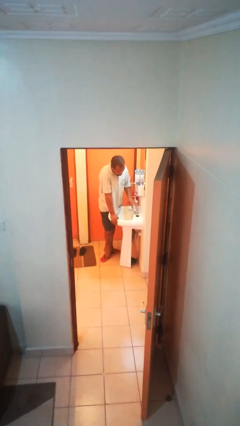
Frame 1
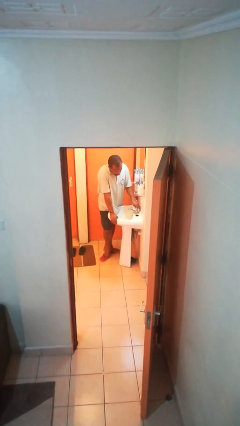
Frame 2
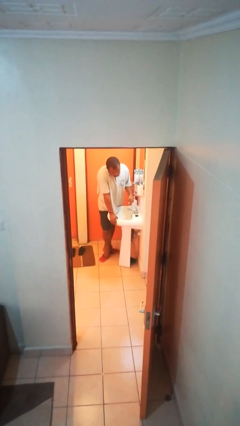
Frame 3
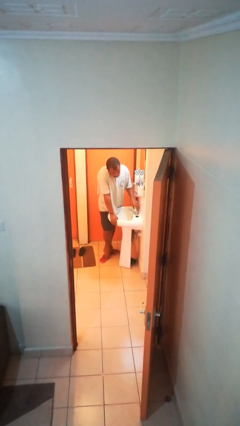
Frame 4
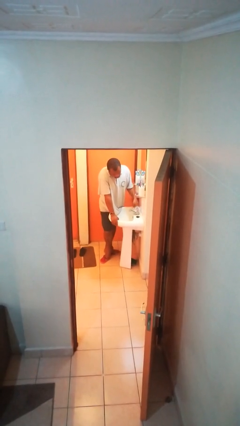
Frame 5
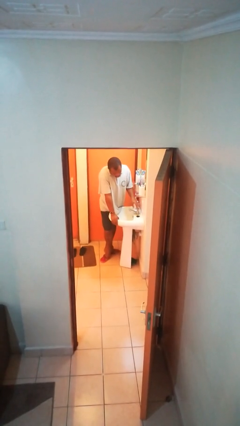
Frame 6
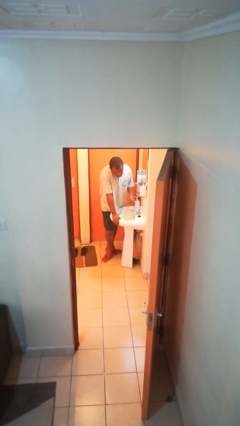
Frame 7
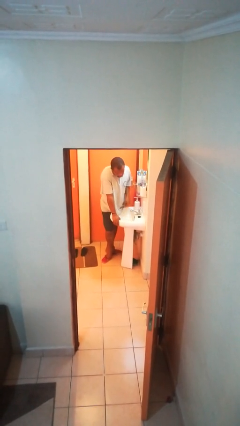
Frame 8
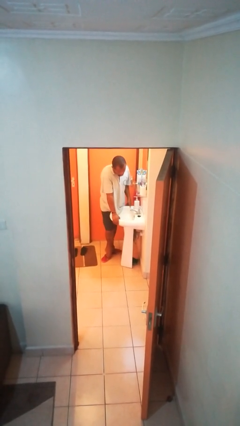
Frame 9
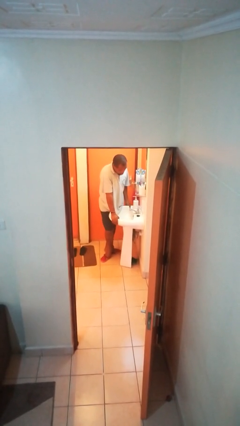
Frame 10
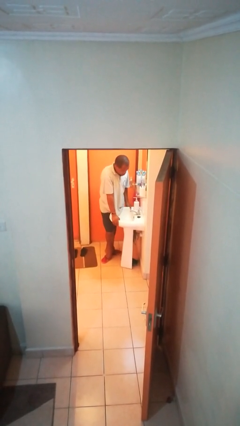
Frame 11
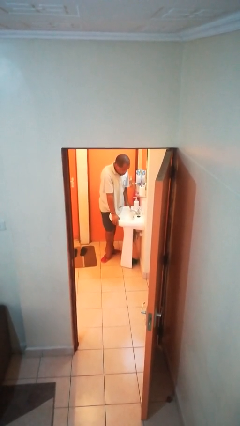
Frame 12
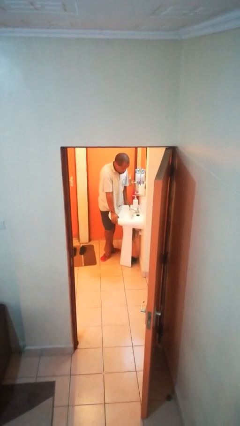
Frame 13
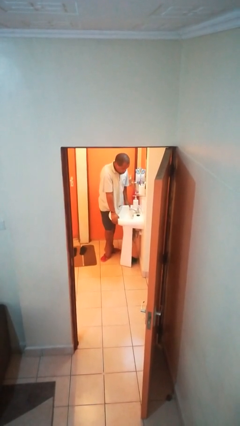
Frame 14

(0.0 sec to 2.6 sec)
person turns on faucet

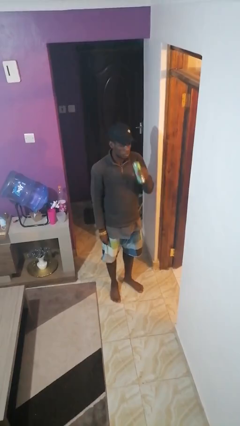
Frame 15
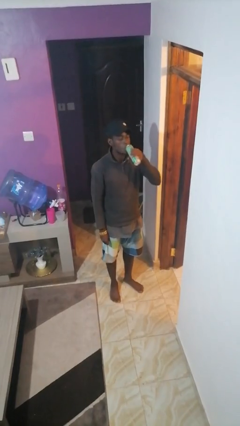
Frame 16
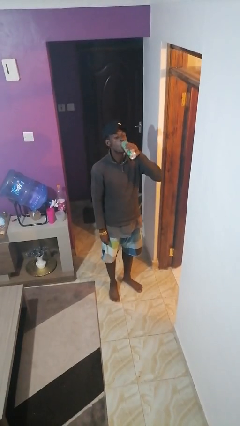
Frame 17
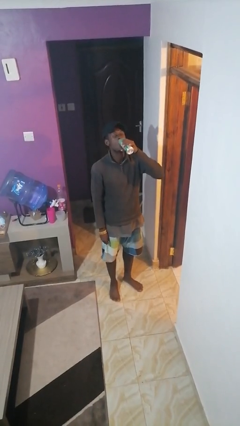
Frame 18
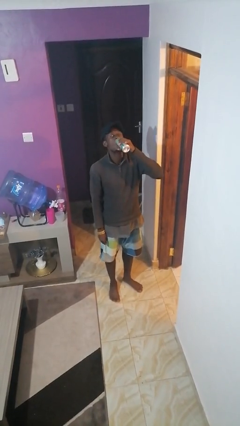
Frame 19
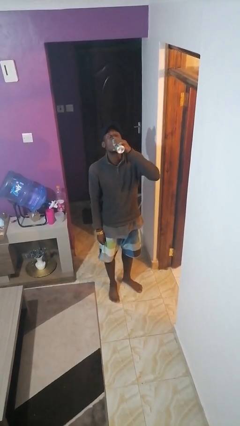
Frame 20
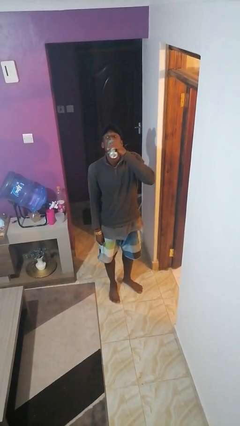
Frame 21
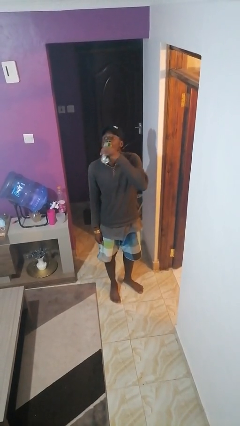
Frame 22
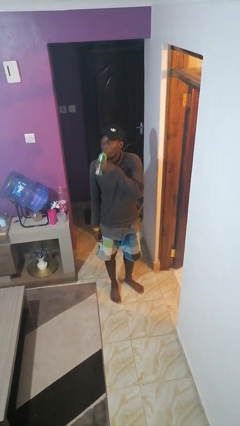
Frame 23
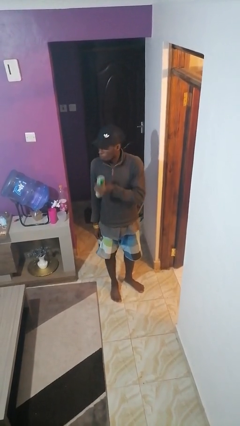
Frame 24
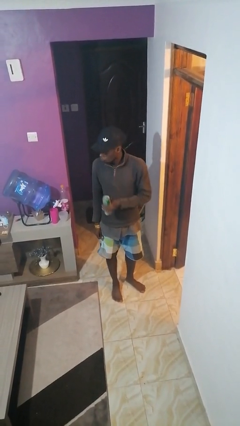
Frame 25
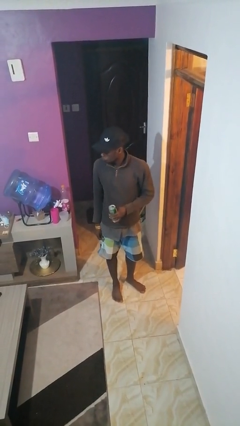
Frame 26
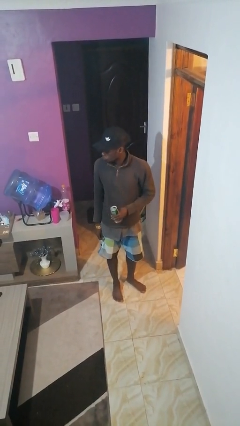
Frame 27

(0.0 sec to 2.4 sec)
person drinks from beverage can

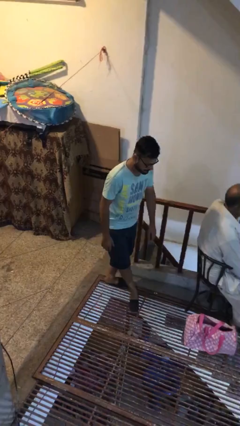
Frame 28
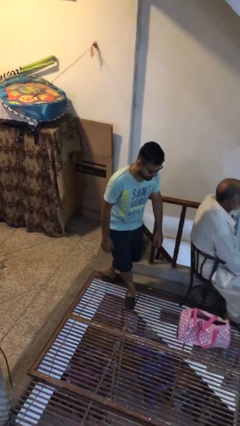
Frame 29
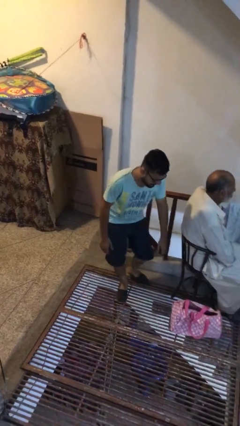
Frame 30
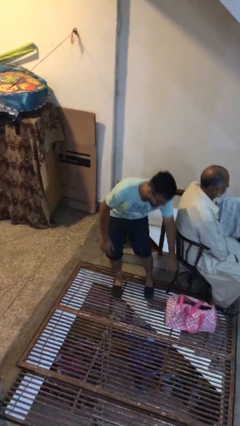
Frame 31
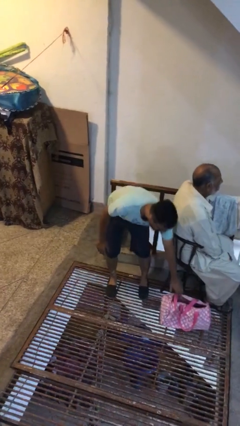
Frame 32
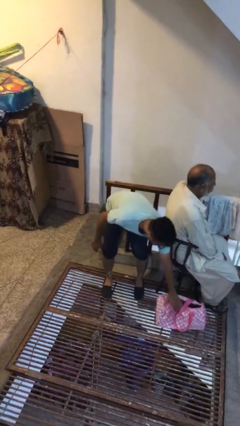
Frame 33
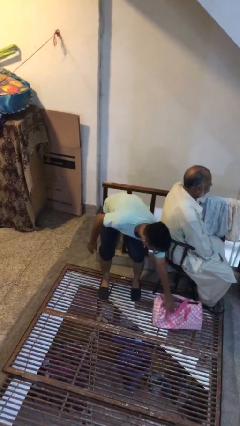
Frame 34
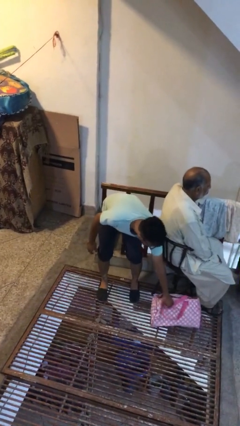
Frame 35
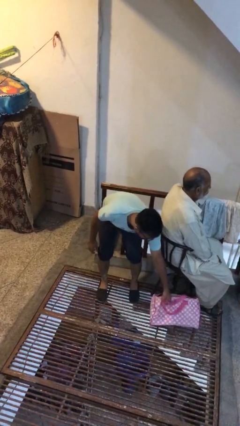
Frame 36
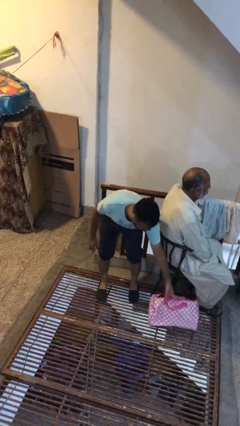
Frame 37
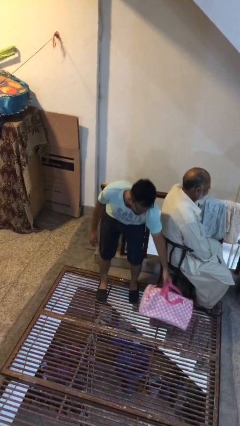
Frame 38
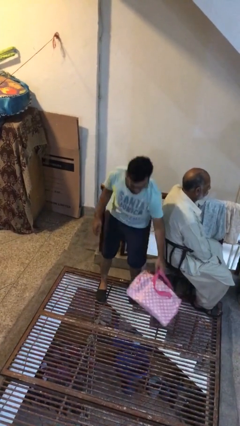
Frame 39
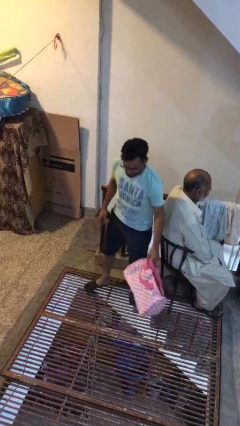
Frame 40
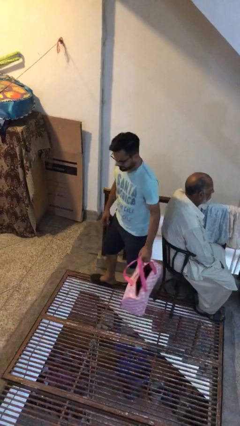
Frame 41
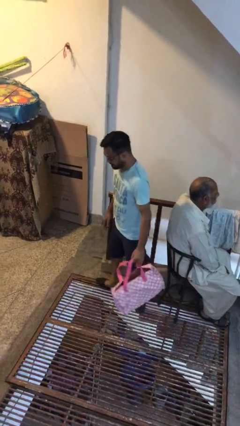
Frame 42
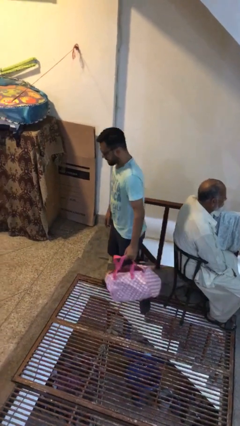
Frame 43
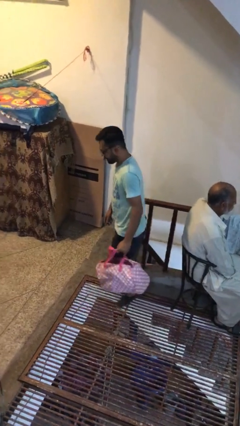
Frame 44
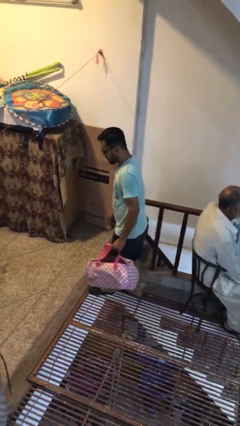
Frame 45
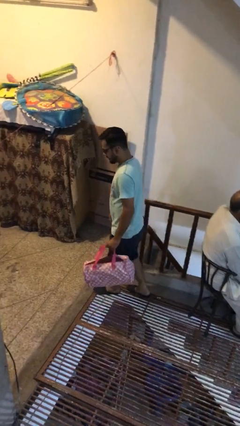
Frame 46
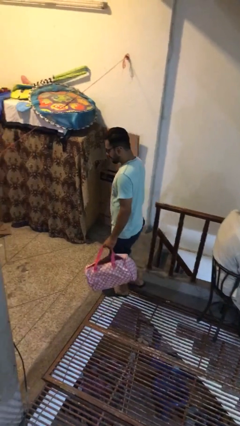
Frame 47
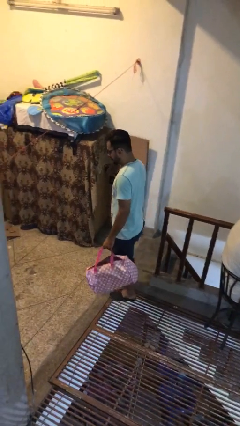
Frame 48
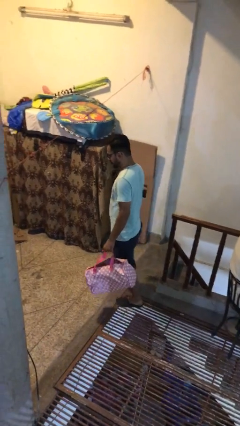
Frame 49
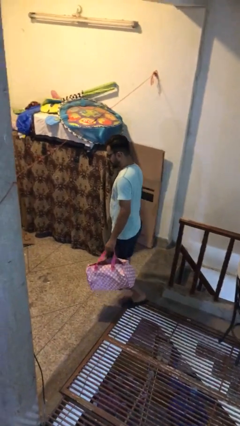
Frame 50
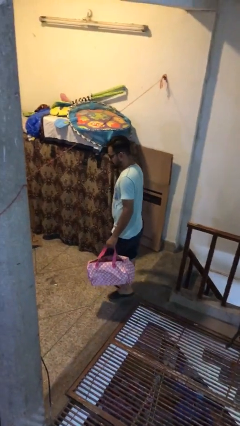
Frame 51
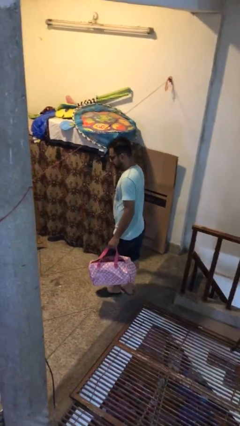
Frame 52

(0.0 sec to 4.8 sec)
person steals object from person

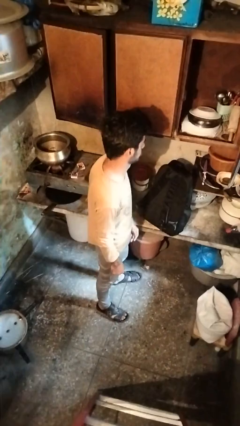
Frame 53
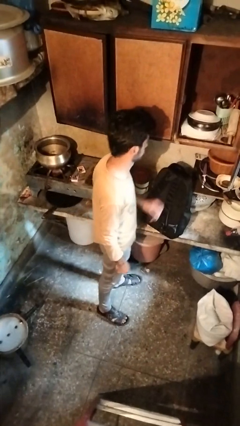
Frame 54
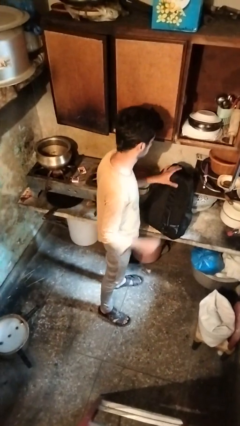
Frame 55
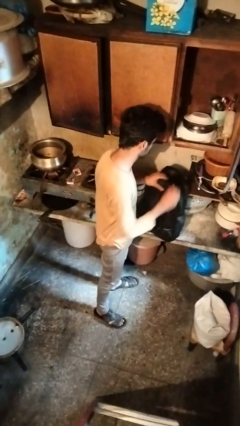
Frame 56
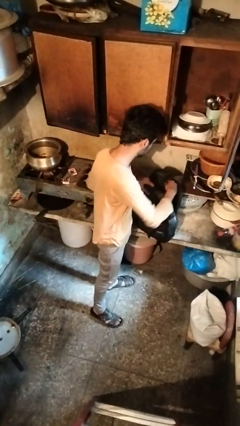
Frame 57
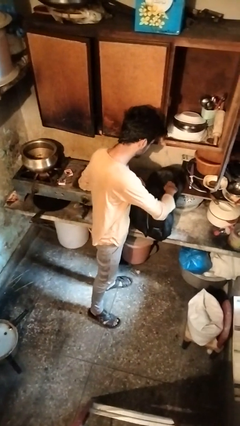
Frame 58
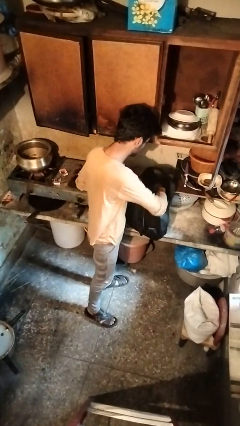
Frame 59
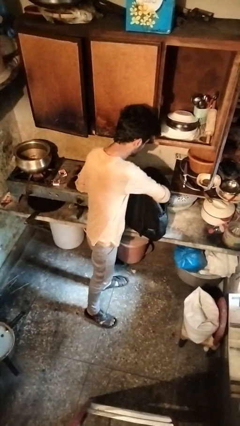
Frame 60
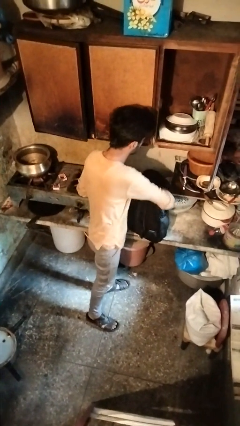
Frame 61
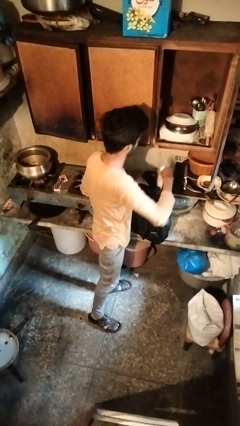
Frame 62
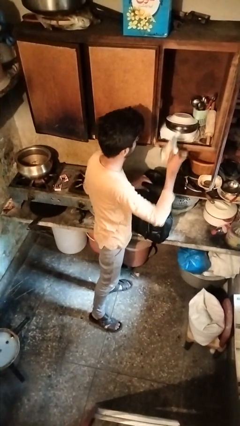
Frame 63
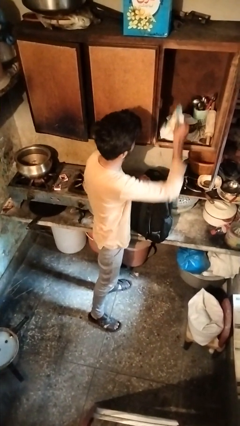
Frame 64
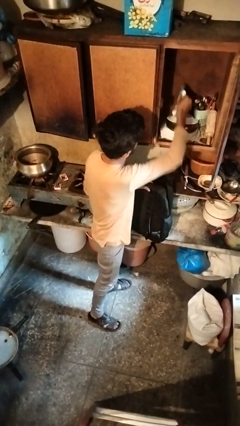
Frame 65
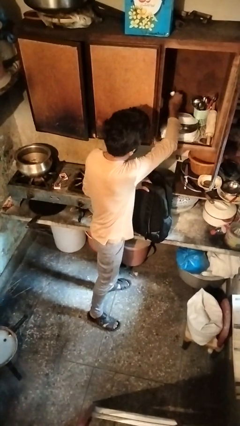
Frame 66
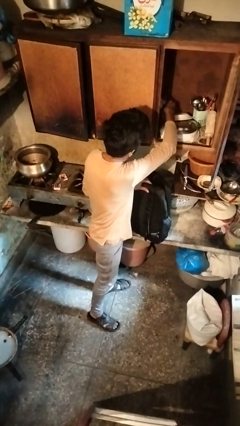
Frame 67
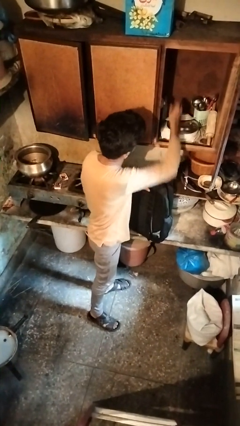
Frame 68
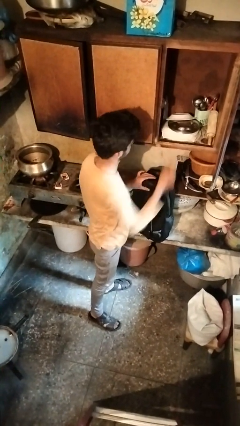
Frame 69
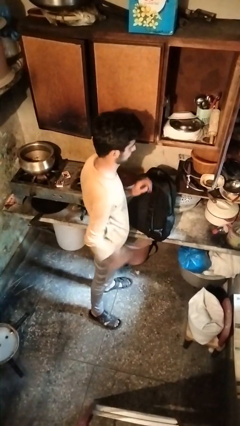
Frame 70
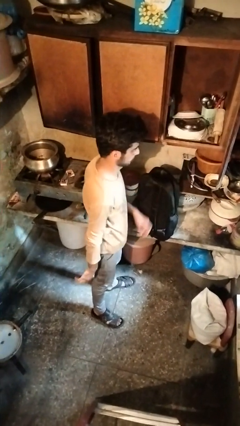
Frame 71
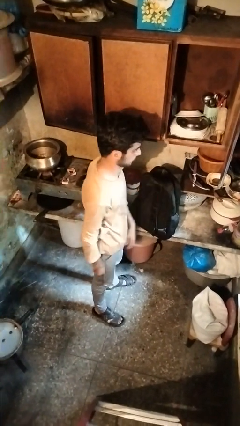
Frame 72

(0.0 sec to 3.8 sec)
person loads groceries into cabinet

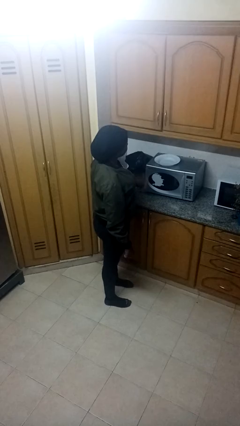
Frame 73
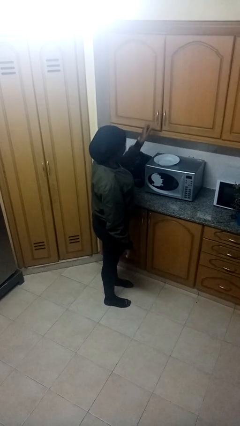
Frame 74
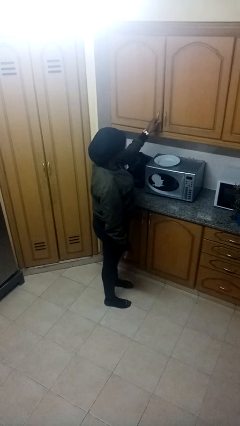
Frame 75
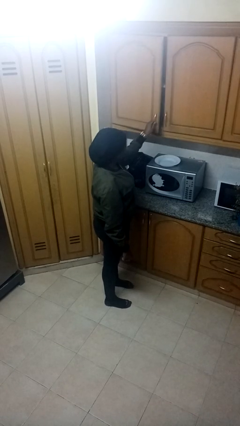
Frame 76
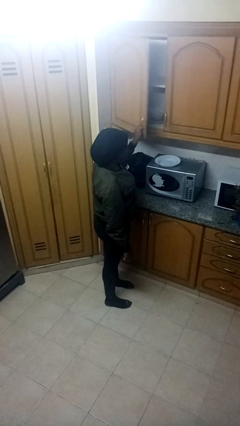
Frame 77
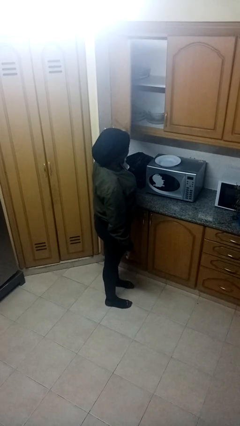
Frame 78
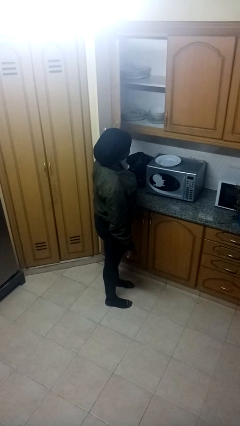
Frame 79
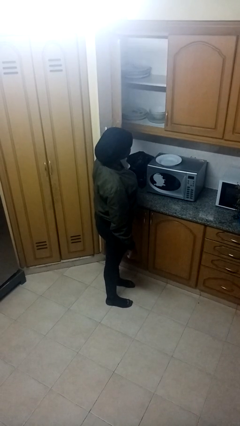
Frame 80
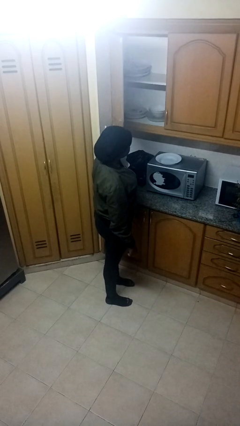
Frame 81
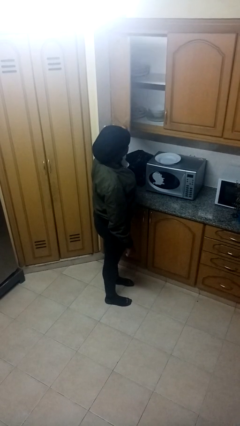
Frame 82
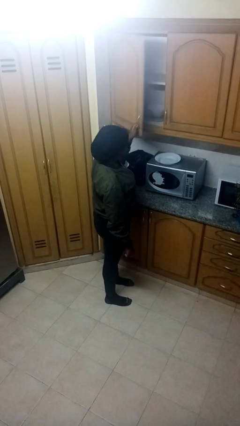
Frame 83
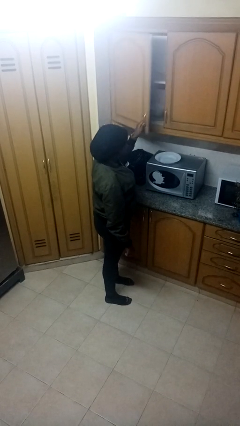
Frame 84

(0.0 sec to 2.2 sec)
person opens cabinet

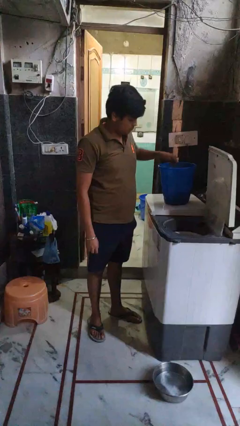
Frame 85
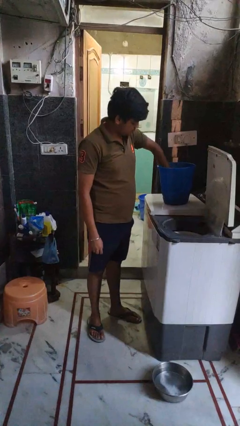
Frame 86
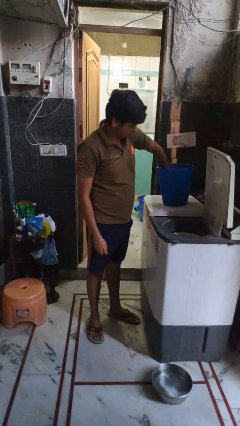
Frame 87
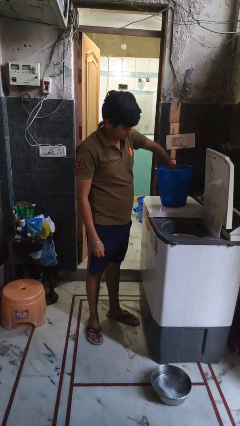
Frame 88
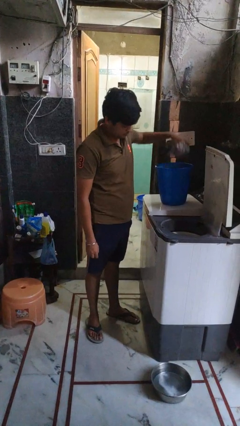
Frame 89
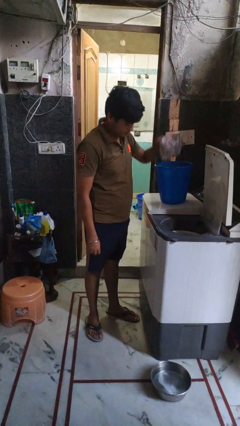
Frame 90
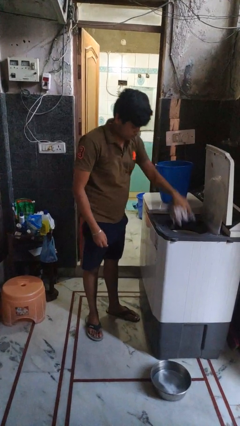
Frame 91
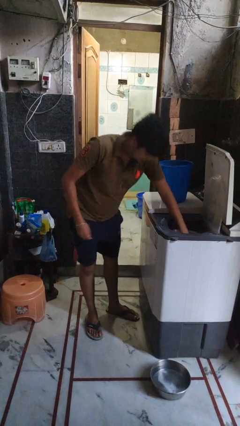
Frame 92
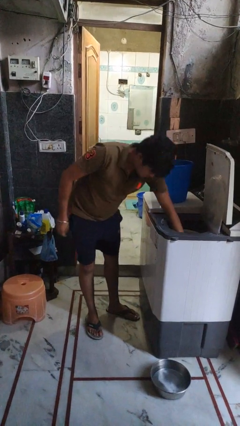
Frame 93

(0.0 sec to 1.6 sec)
person loads dryer

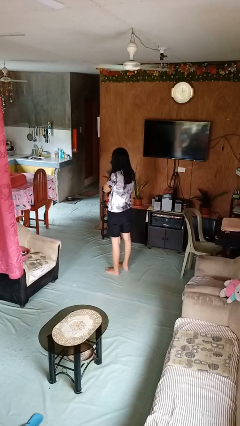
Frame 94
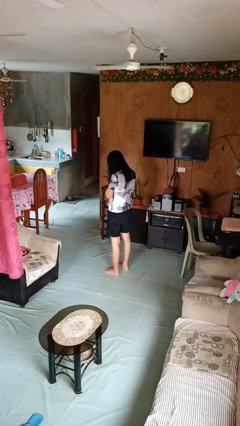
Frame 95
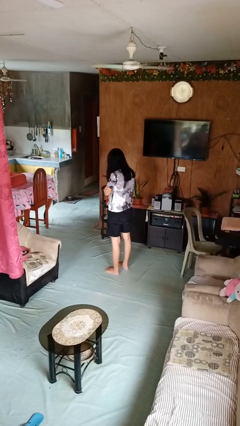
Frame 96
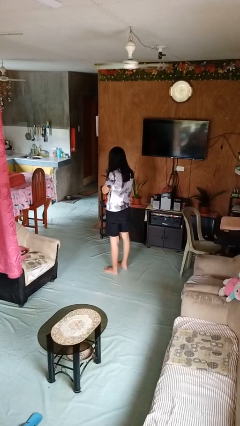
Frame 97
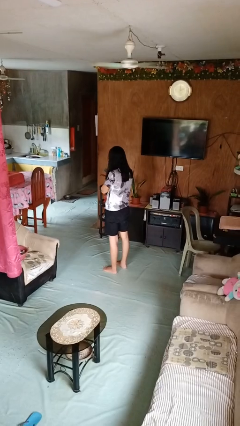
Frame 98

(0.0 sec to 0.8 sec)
person blows nose
